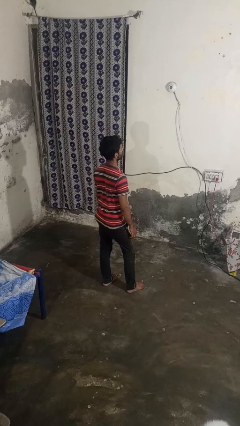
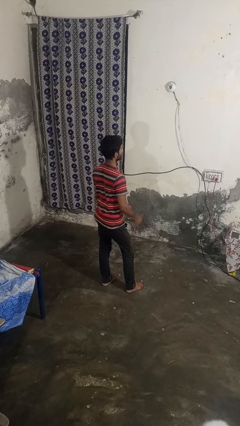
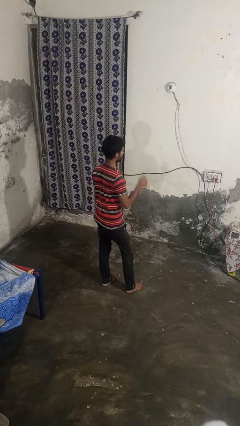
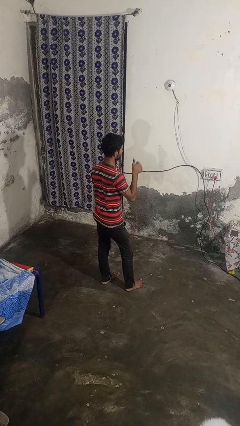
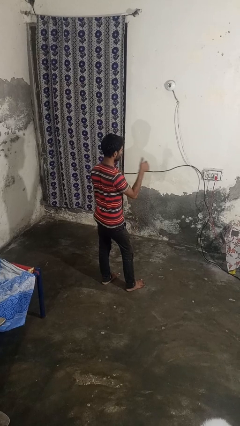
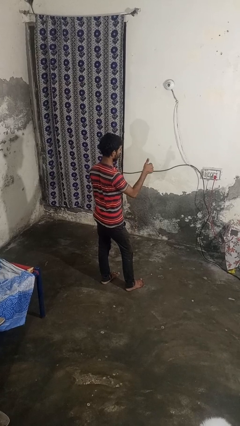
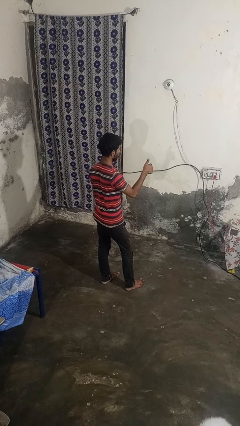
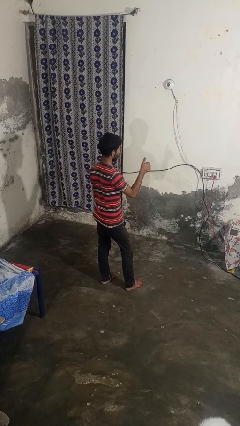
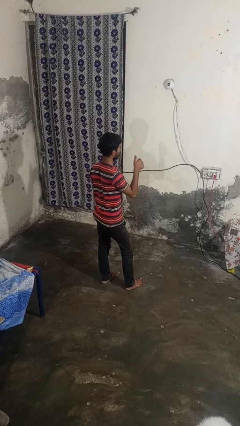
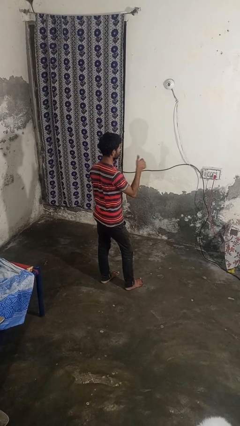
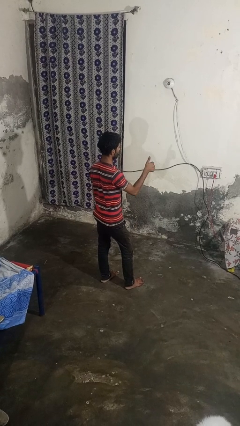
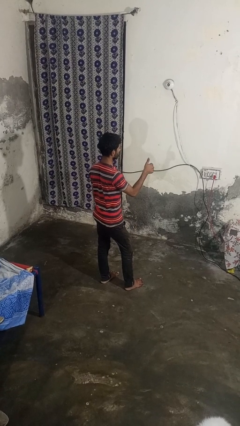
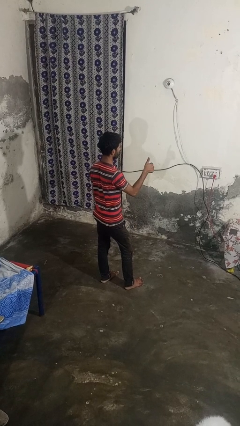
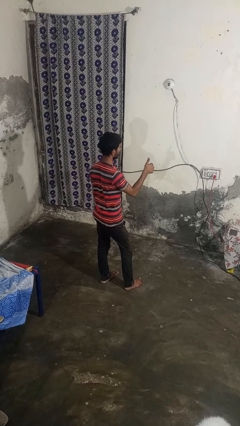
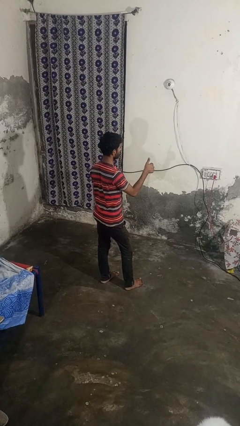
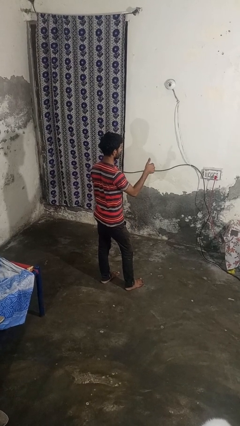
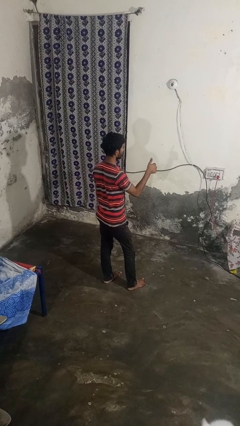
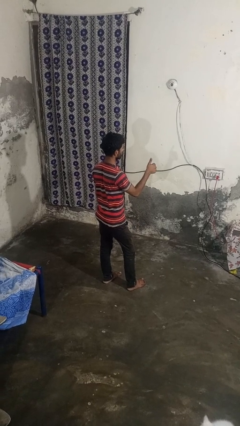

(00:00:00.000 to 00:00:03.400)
person gestures thumbs up

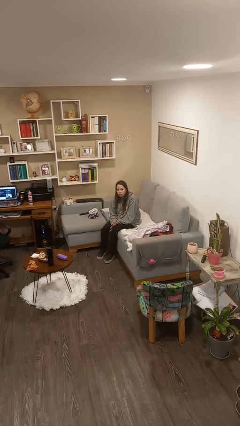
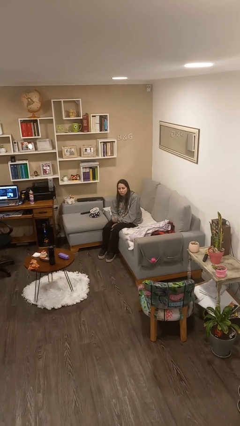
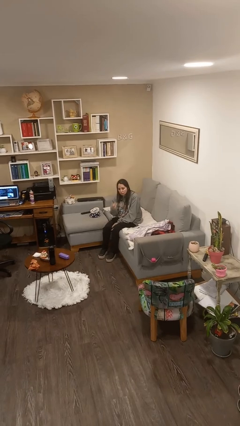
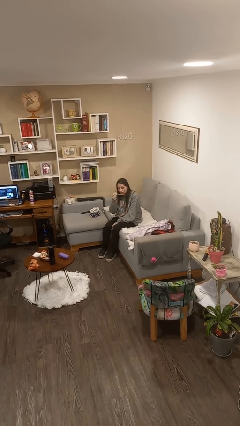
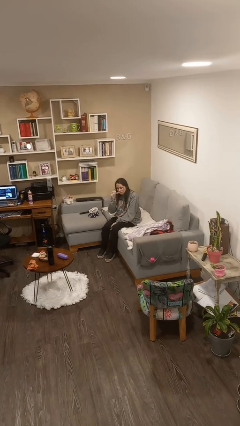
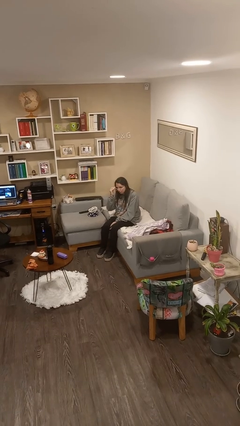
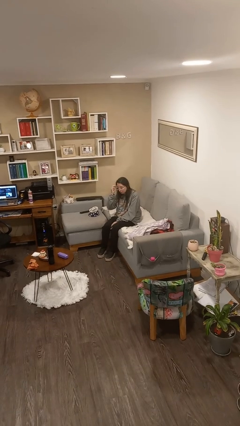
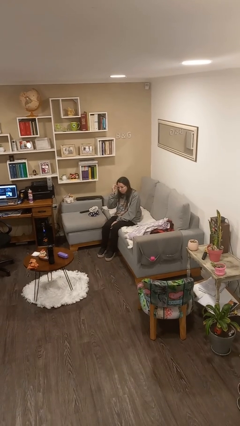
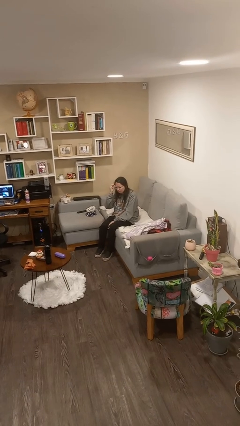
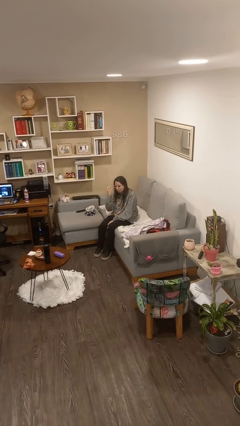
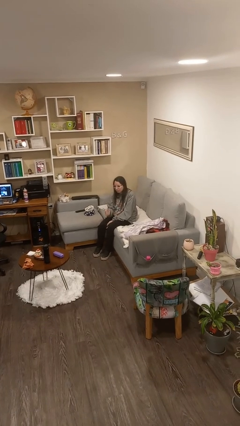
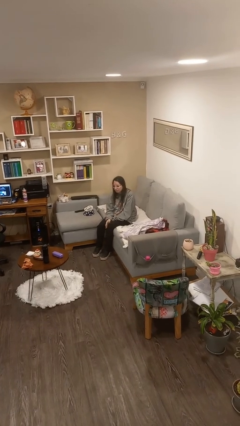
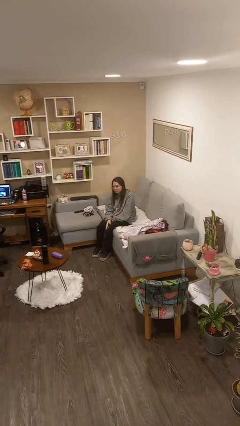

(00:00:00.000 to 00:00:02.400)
person puts on glasses

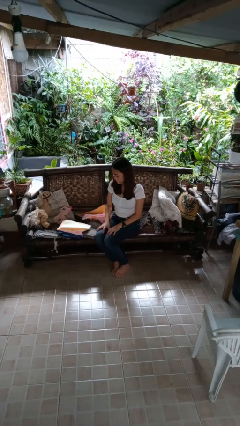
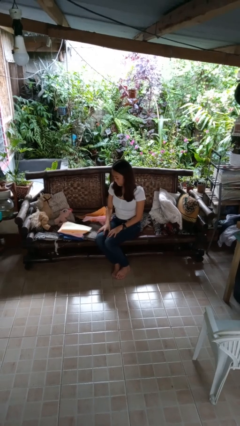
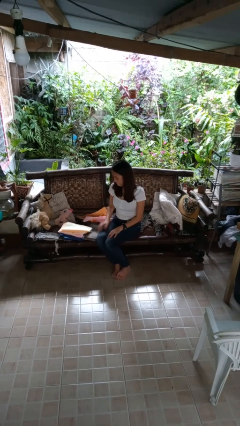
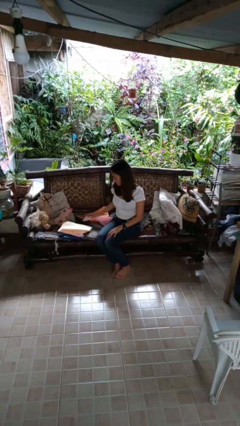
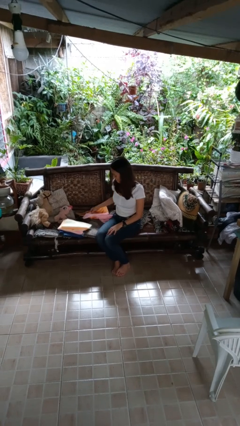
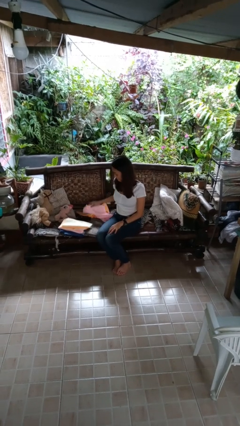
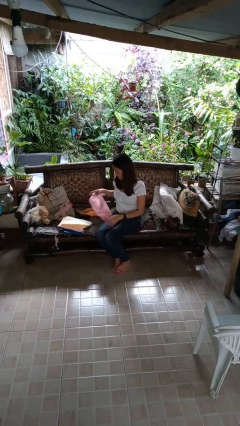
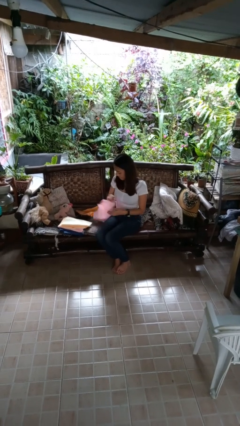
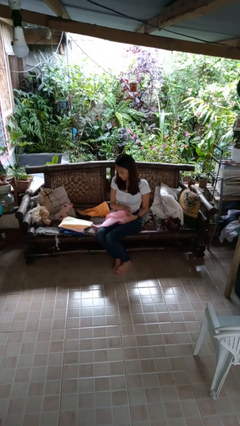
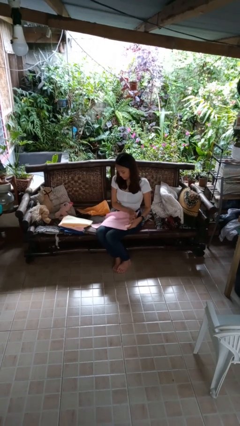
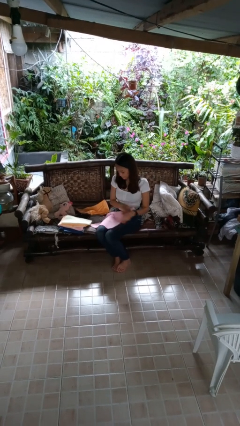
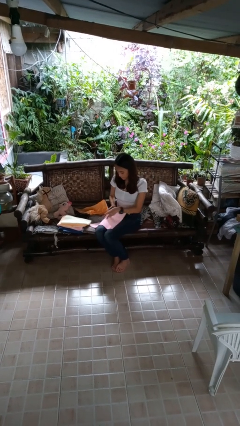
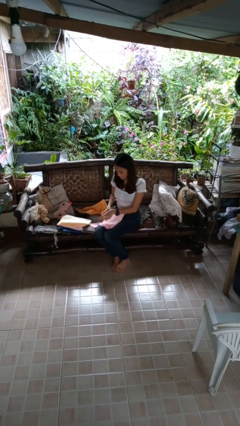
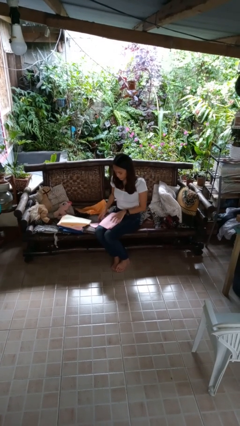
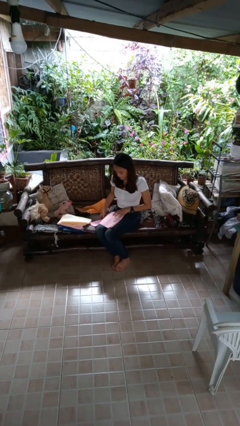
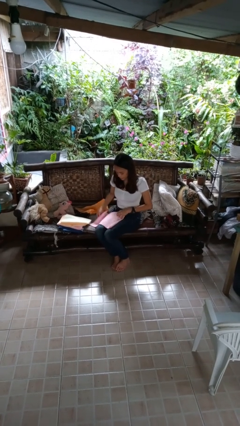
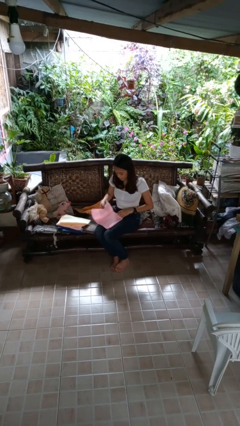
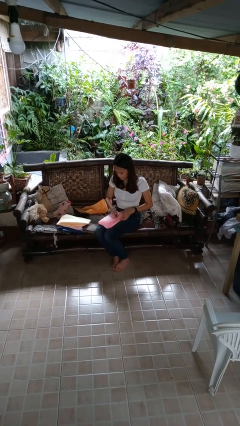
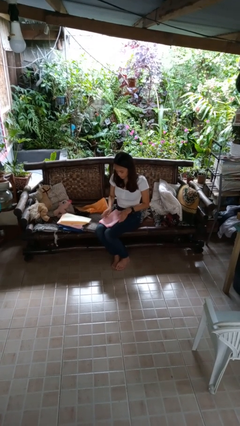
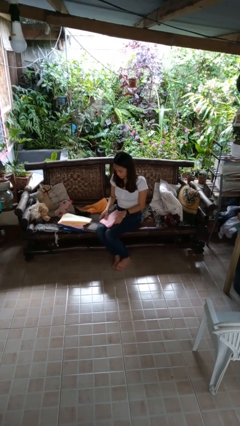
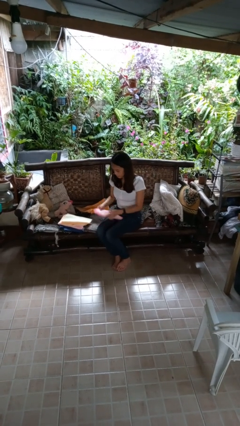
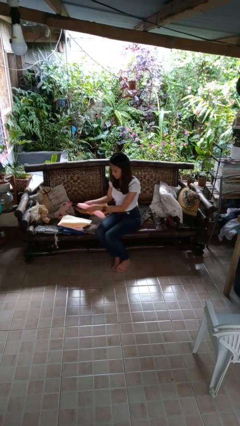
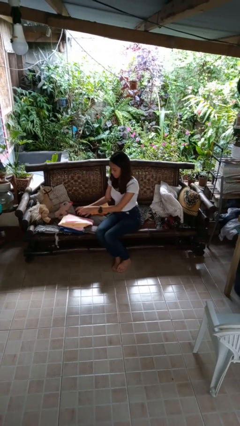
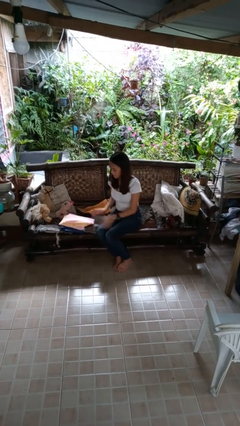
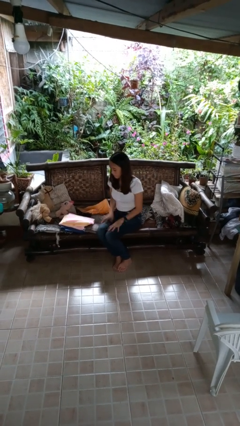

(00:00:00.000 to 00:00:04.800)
person folds towel

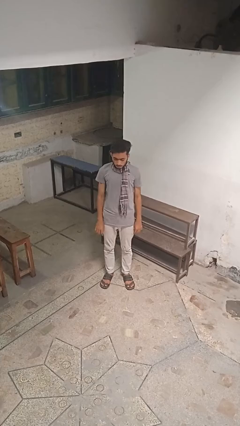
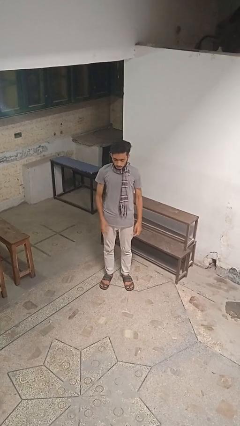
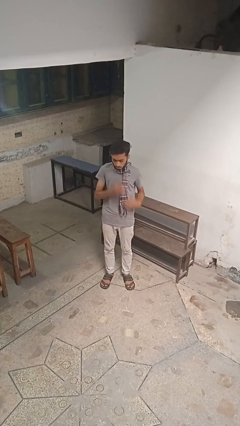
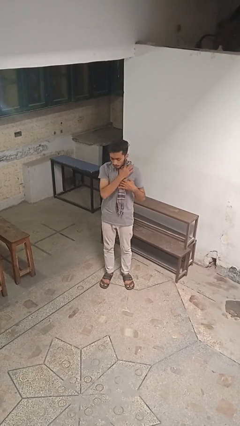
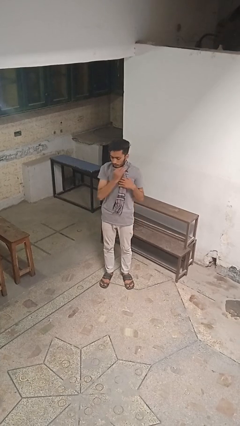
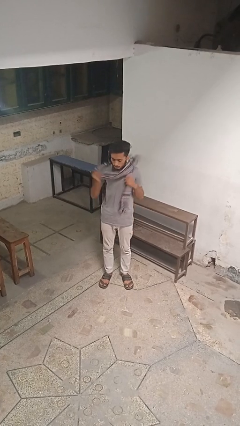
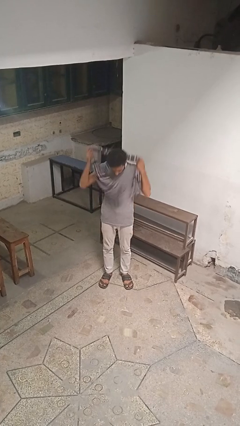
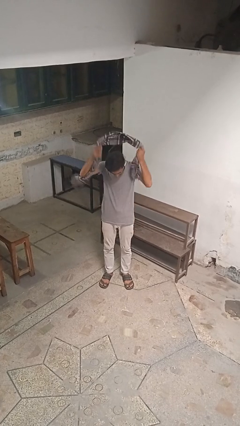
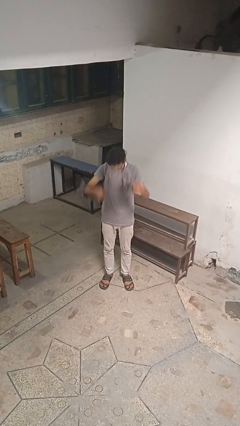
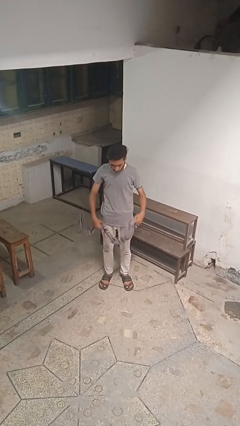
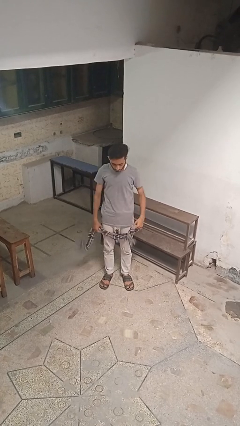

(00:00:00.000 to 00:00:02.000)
person takes off scarf

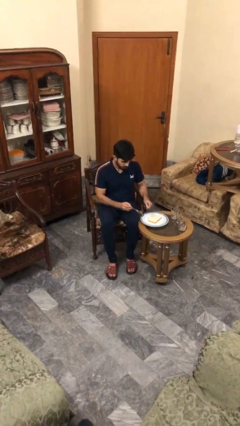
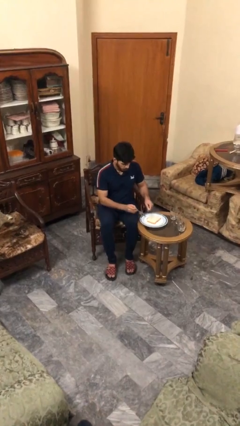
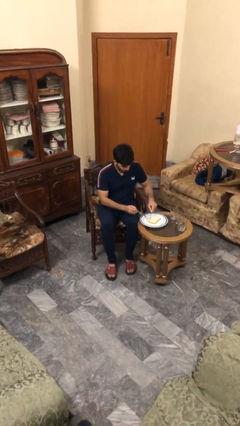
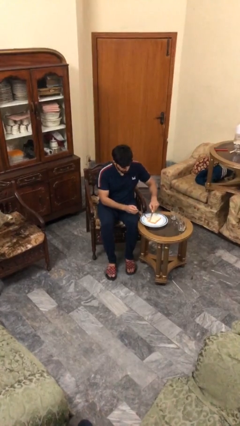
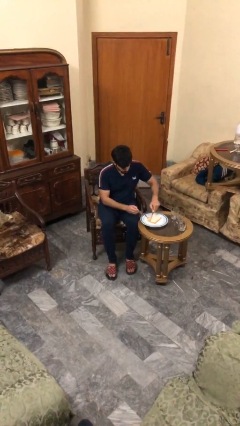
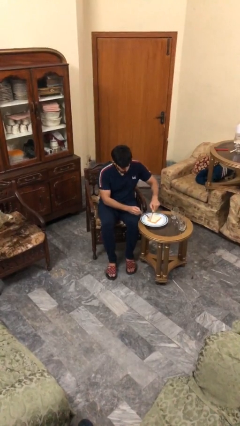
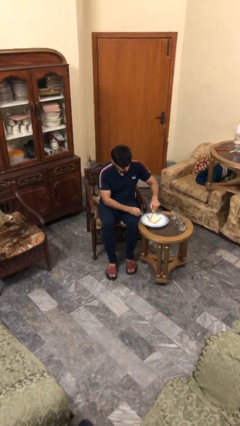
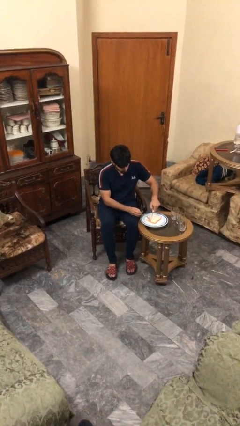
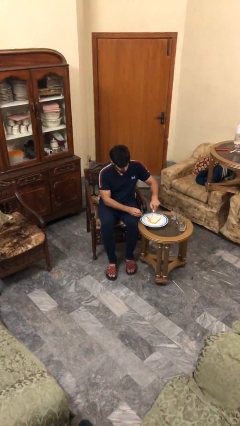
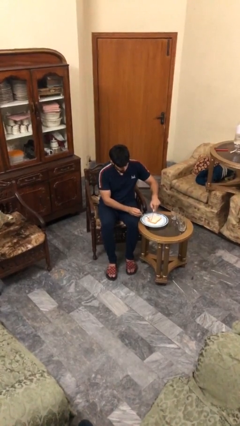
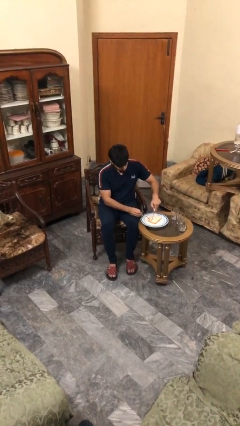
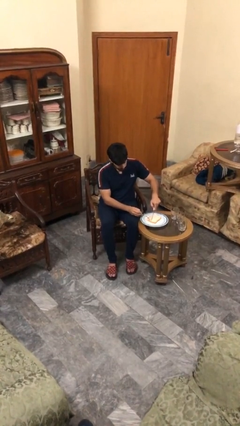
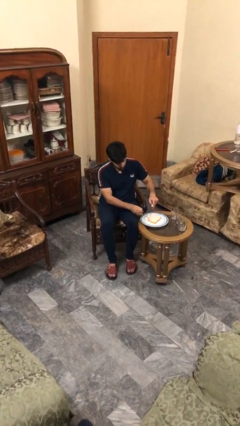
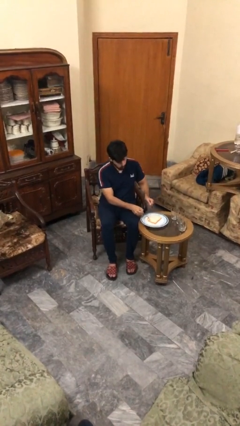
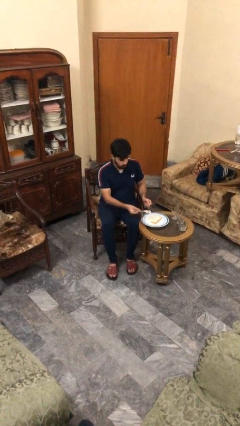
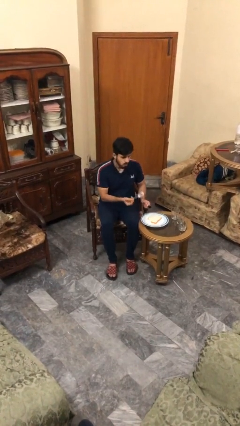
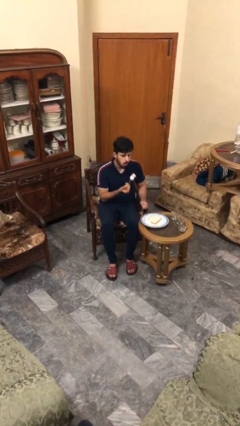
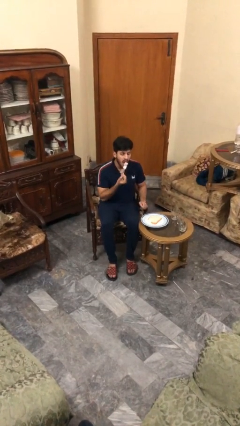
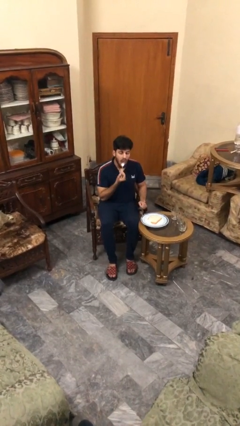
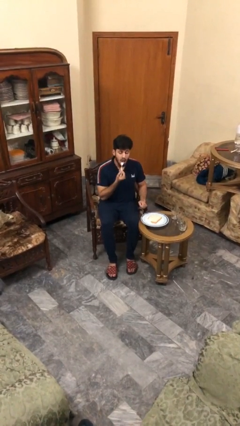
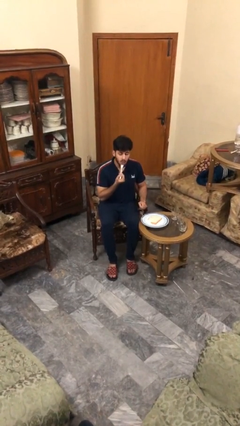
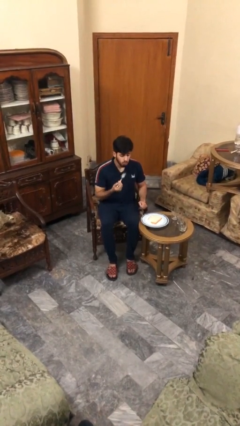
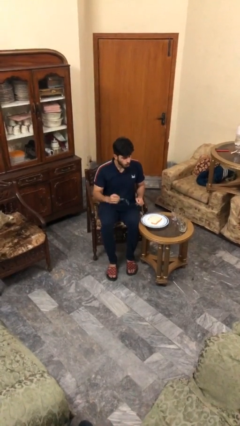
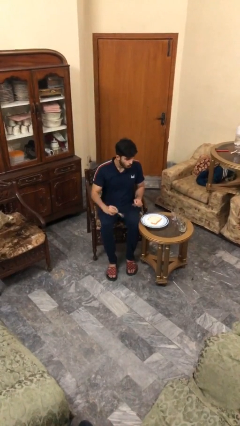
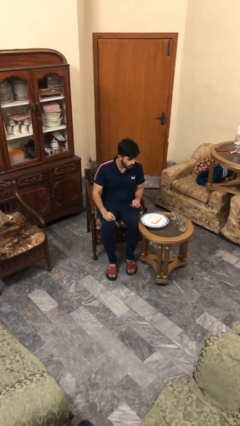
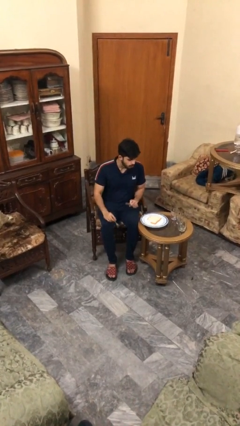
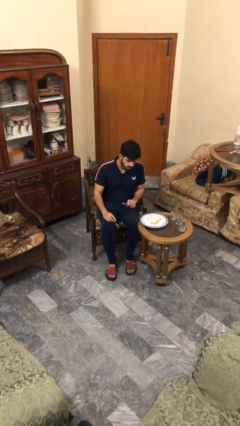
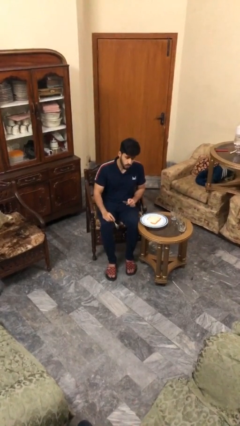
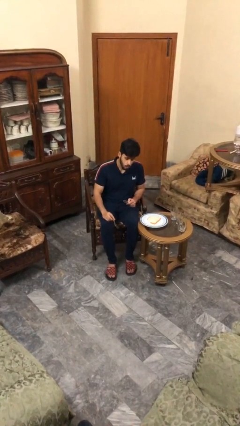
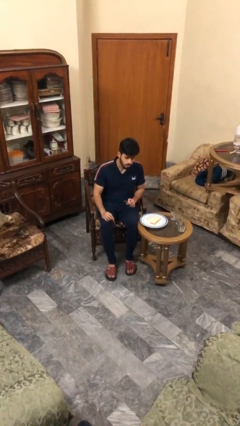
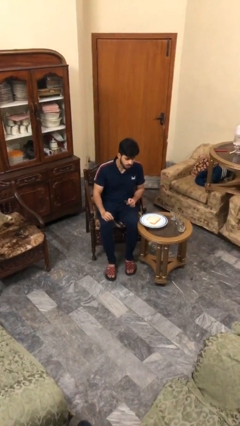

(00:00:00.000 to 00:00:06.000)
person eats with utensil
